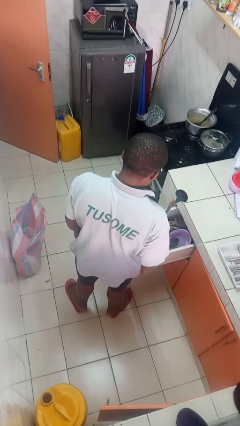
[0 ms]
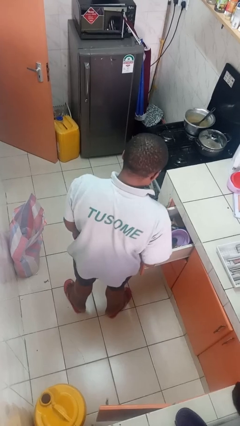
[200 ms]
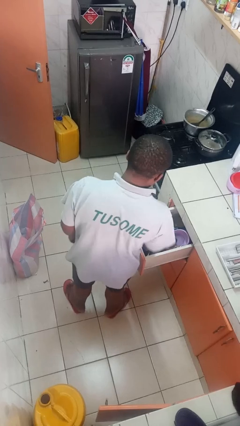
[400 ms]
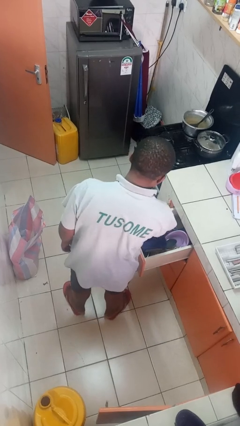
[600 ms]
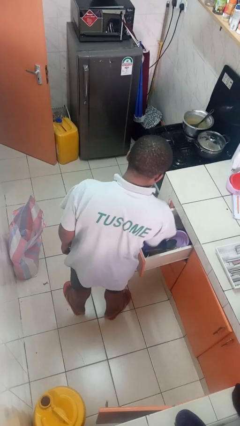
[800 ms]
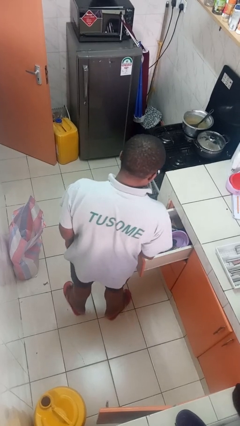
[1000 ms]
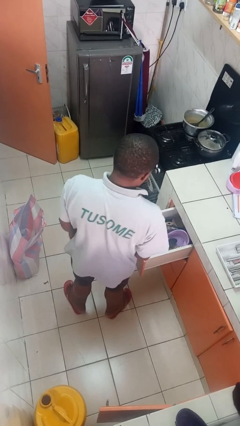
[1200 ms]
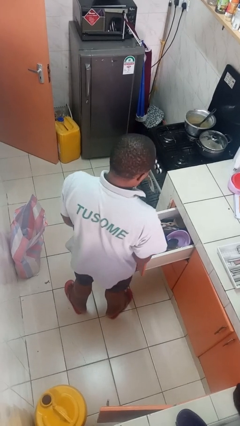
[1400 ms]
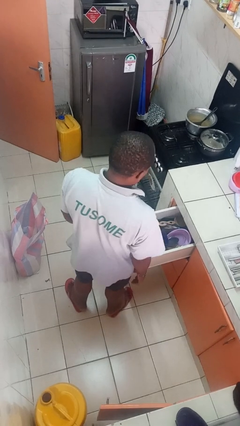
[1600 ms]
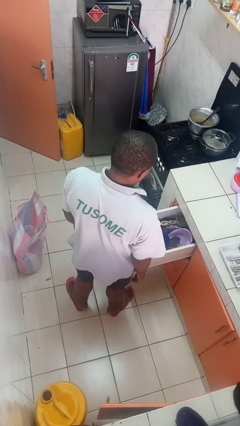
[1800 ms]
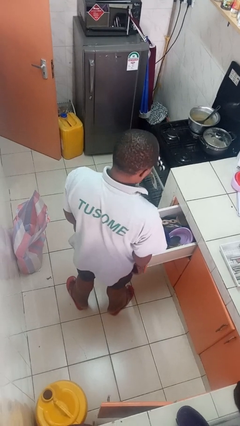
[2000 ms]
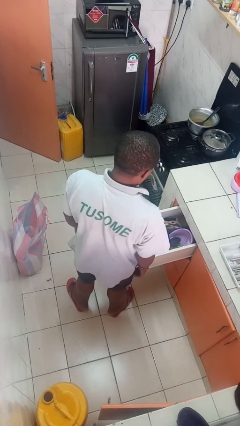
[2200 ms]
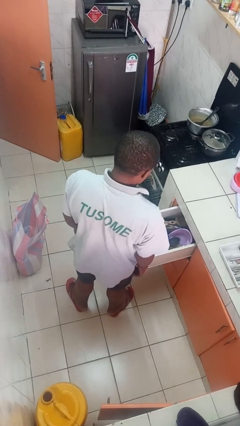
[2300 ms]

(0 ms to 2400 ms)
person puts object into kitchen drawer

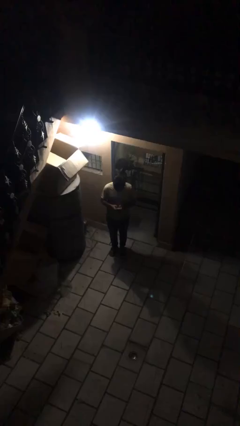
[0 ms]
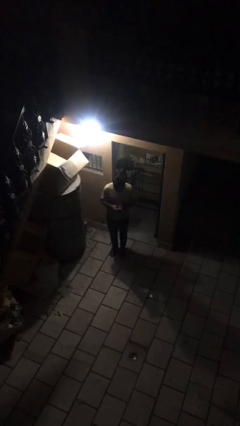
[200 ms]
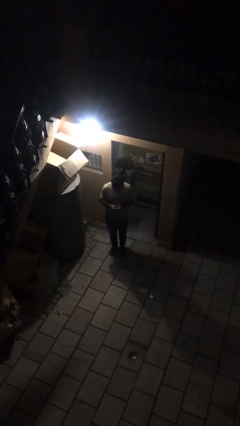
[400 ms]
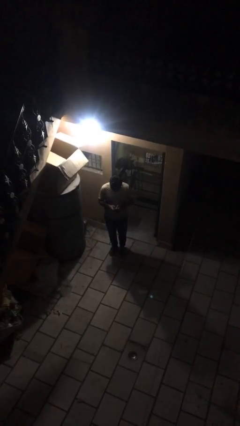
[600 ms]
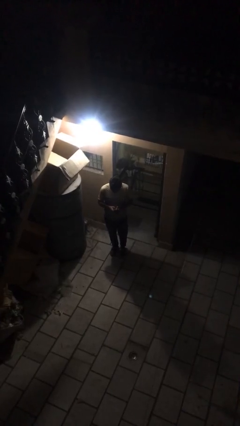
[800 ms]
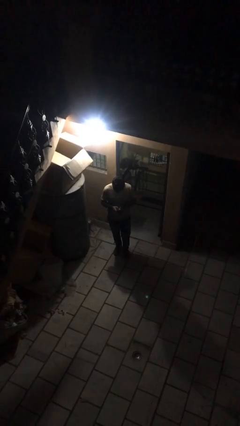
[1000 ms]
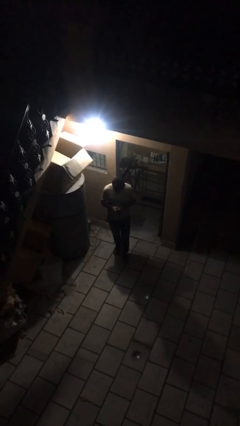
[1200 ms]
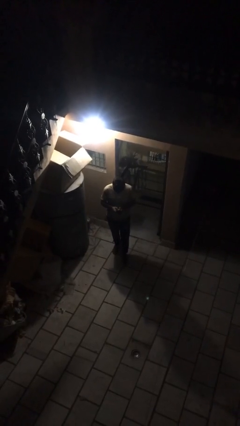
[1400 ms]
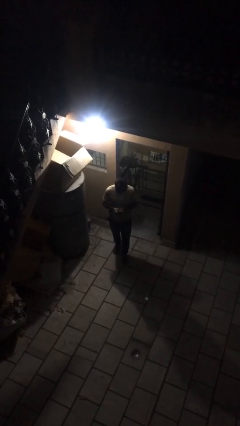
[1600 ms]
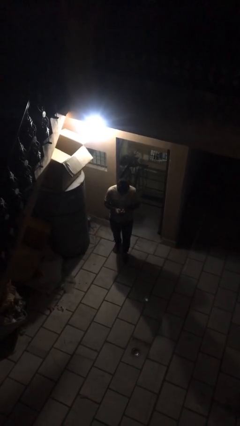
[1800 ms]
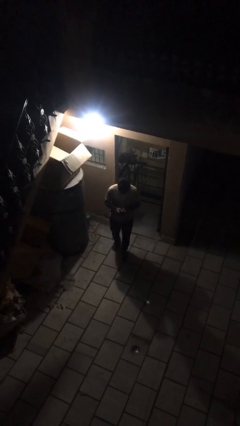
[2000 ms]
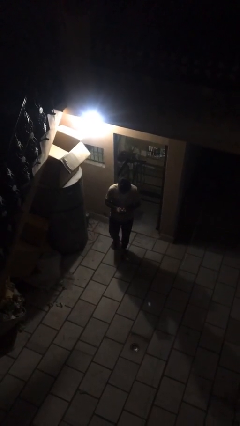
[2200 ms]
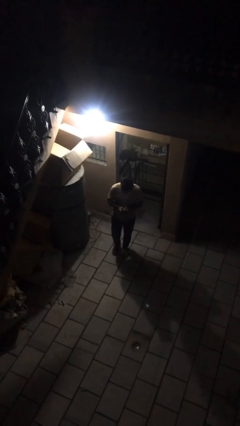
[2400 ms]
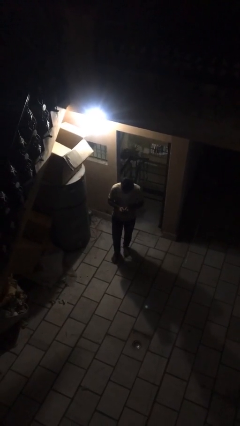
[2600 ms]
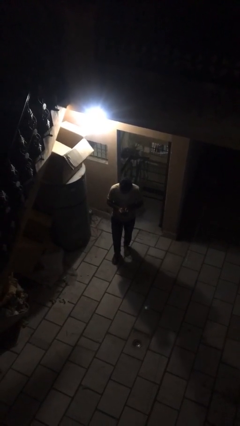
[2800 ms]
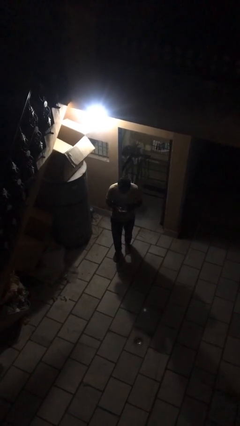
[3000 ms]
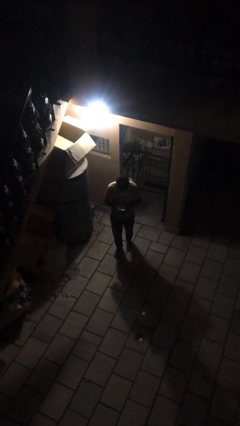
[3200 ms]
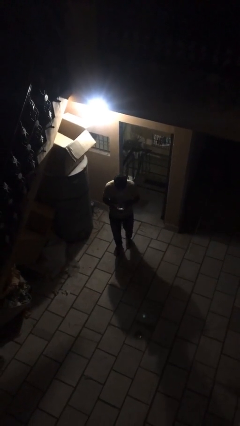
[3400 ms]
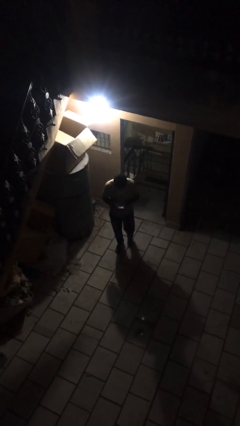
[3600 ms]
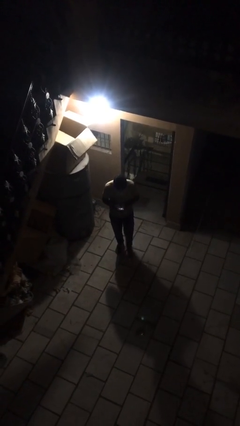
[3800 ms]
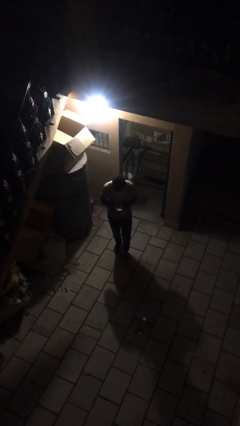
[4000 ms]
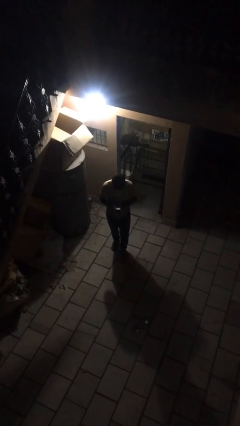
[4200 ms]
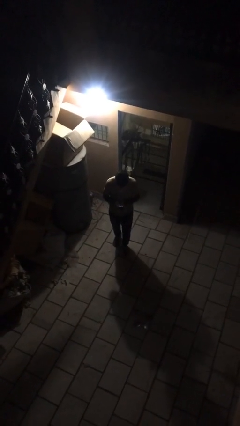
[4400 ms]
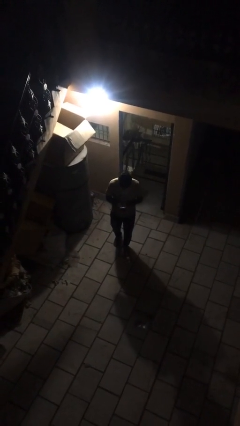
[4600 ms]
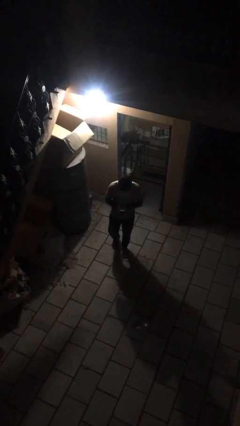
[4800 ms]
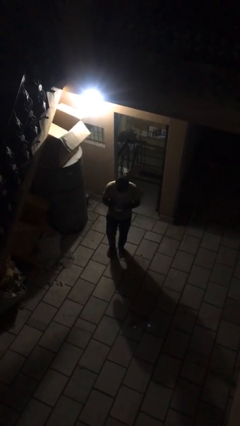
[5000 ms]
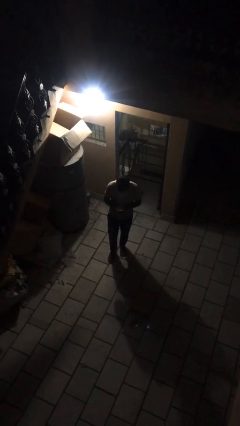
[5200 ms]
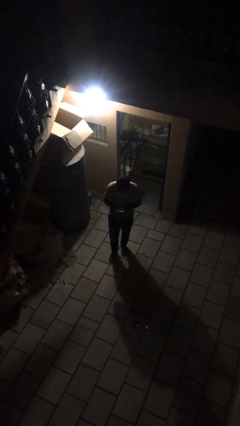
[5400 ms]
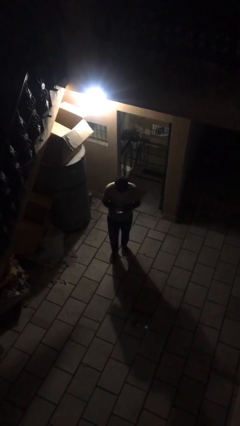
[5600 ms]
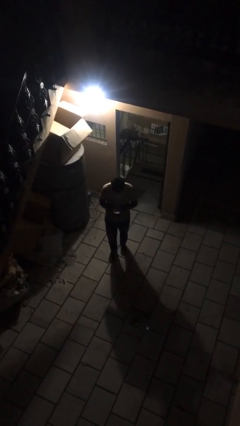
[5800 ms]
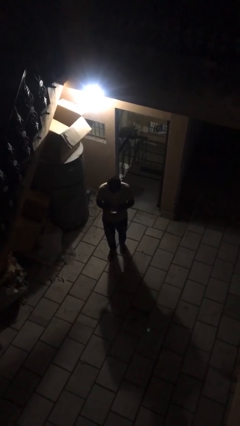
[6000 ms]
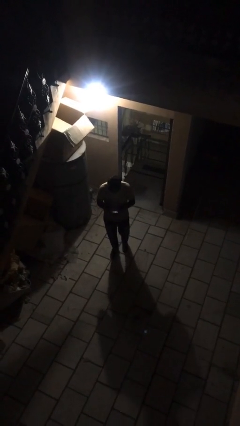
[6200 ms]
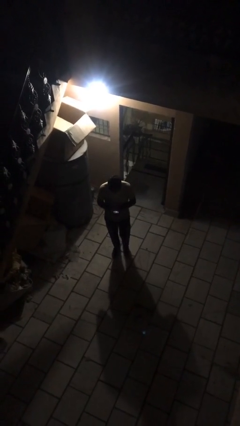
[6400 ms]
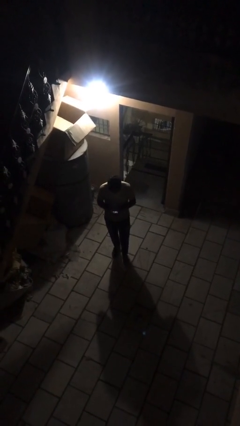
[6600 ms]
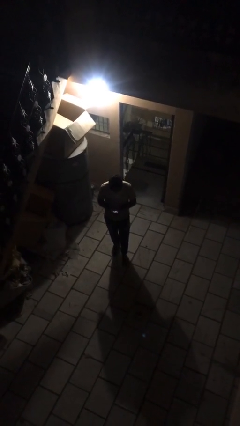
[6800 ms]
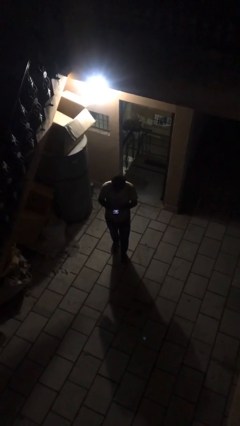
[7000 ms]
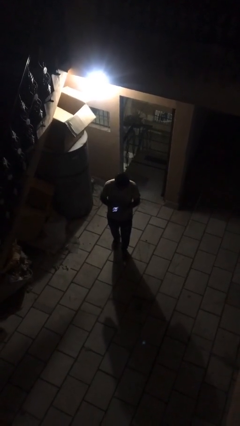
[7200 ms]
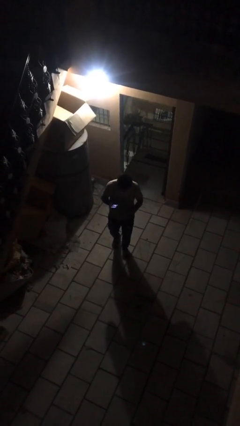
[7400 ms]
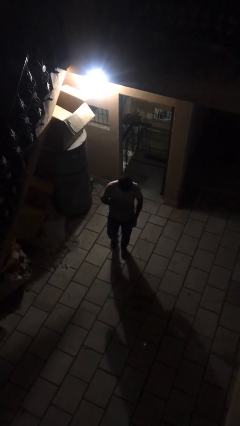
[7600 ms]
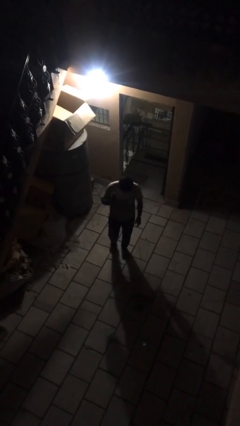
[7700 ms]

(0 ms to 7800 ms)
person texts on phone

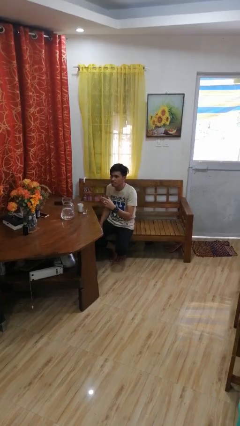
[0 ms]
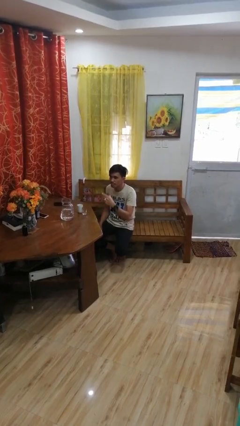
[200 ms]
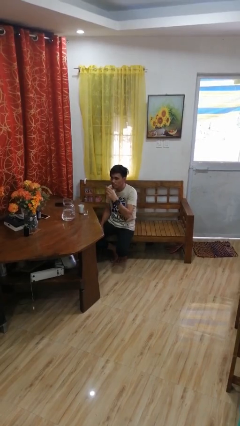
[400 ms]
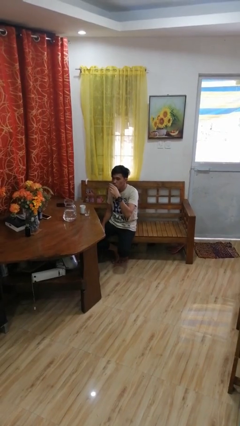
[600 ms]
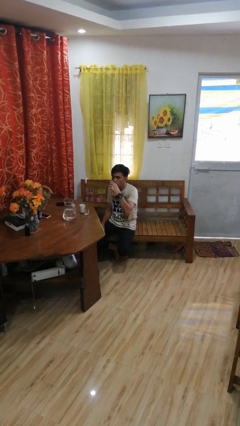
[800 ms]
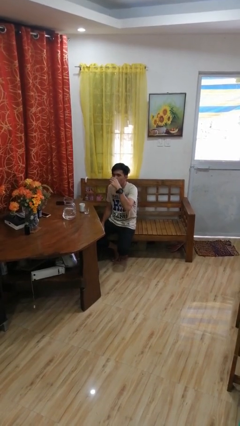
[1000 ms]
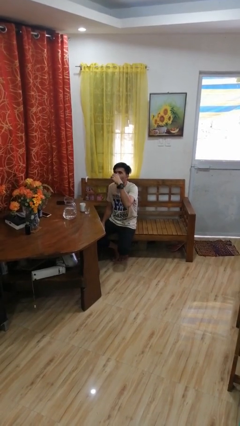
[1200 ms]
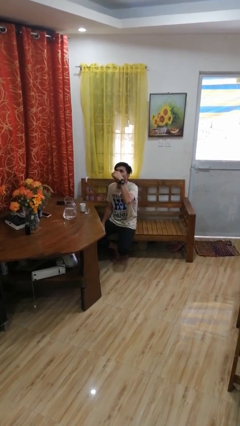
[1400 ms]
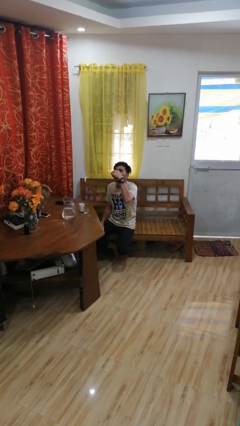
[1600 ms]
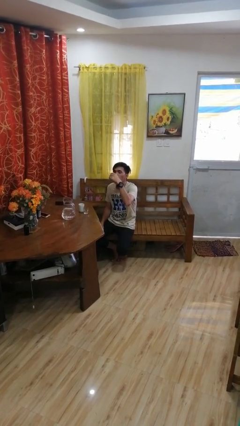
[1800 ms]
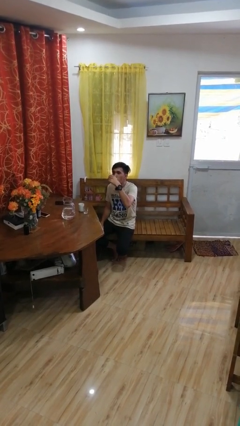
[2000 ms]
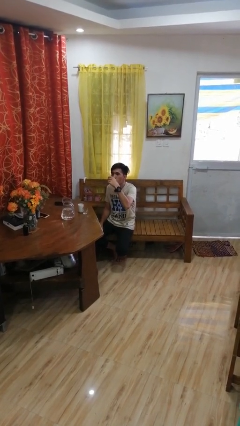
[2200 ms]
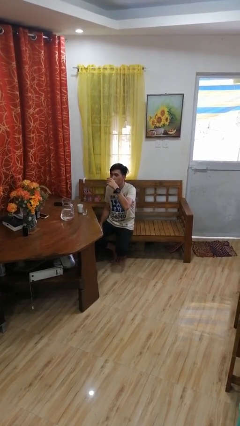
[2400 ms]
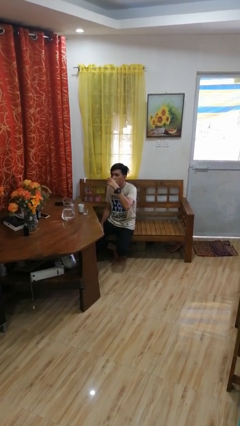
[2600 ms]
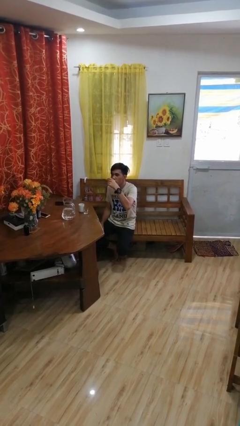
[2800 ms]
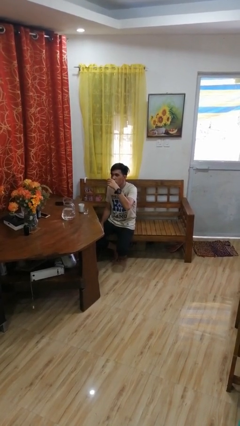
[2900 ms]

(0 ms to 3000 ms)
person drinks from shotglass

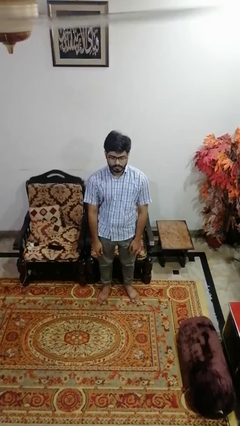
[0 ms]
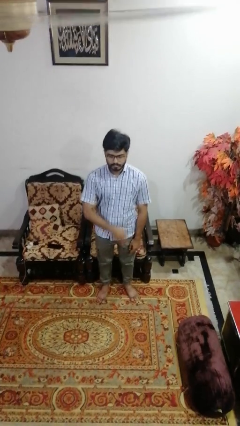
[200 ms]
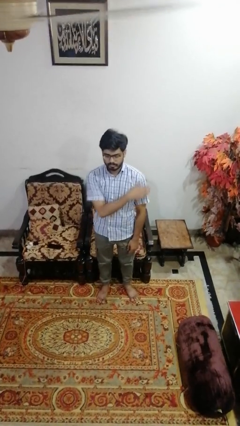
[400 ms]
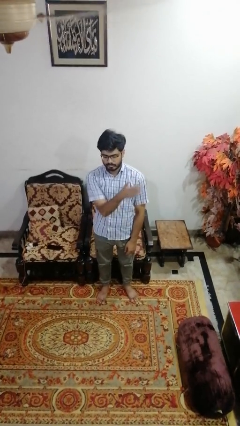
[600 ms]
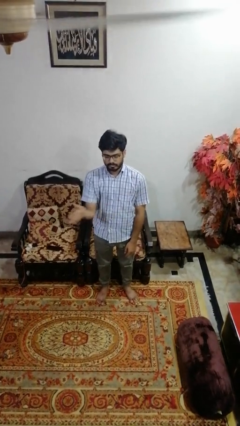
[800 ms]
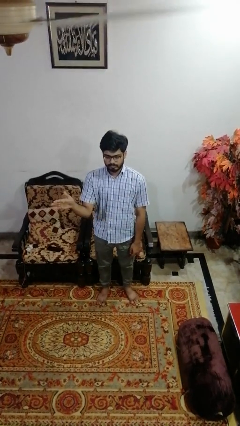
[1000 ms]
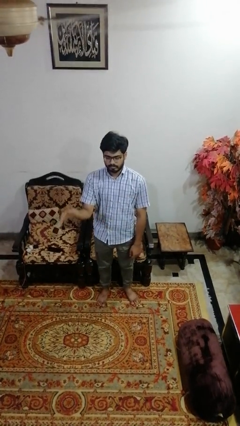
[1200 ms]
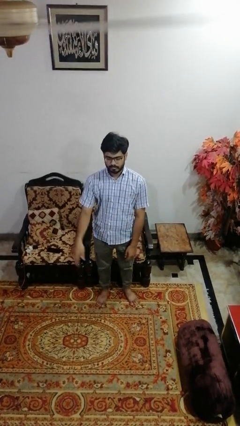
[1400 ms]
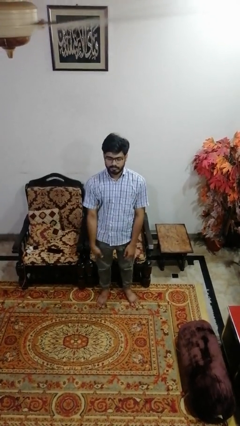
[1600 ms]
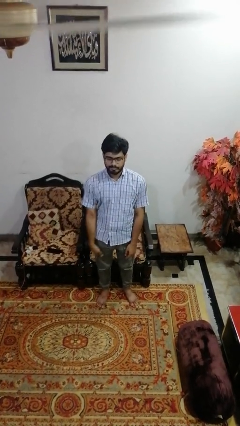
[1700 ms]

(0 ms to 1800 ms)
person gestures swipe right

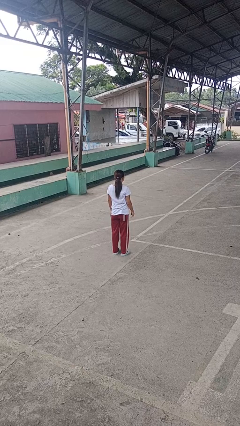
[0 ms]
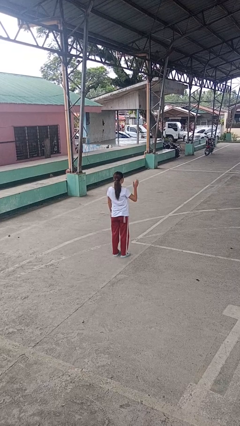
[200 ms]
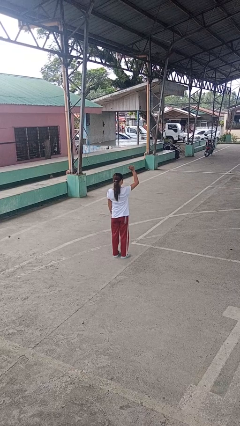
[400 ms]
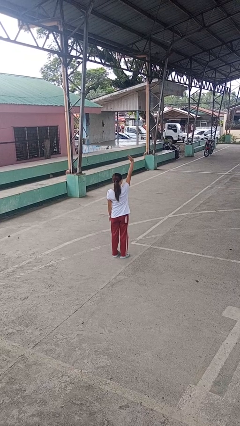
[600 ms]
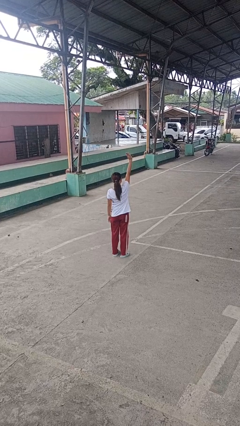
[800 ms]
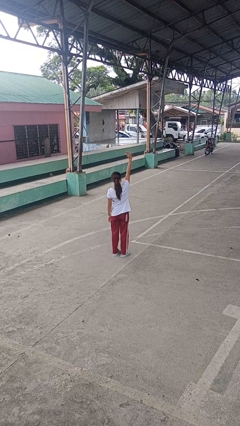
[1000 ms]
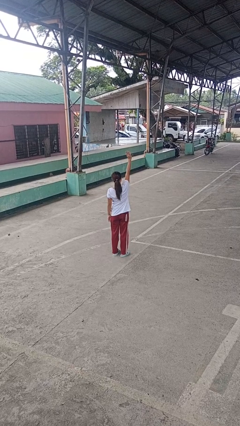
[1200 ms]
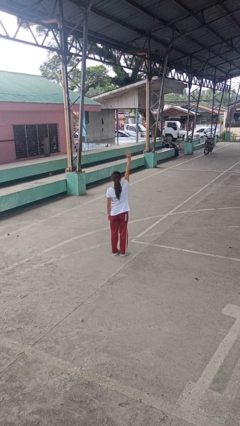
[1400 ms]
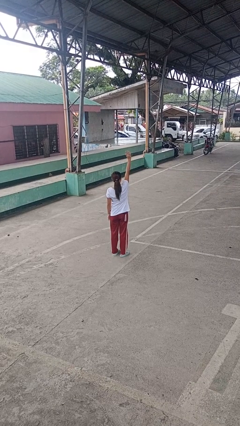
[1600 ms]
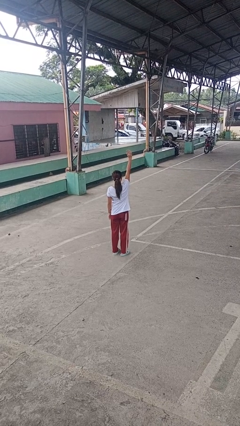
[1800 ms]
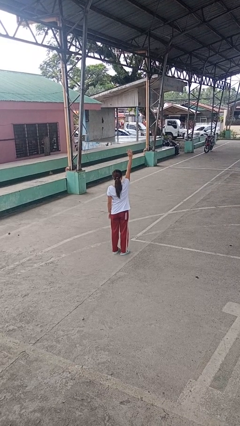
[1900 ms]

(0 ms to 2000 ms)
person gestures raise hand

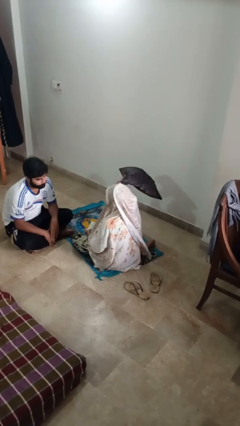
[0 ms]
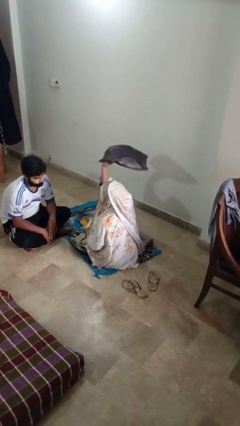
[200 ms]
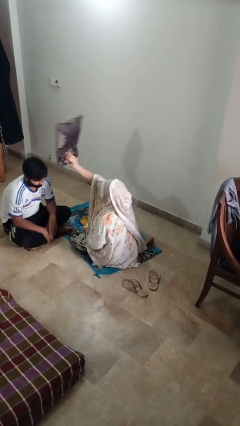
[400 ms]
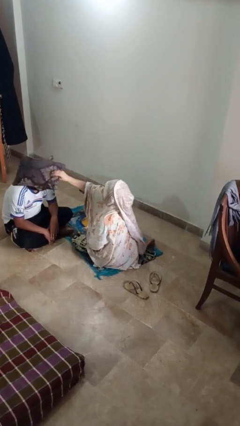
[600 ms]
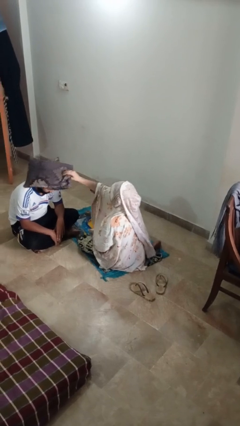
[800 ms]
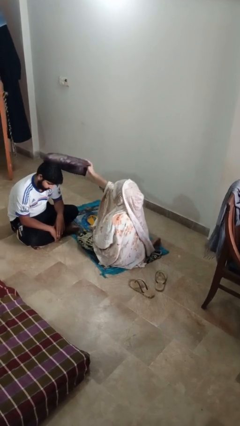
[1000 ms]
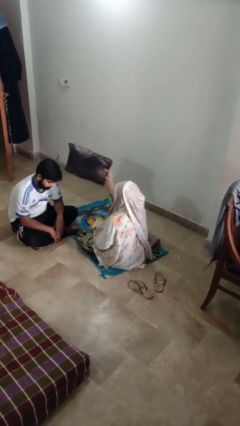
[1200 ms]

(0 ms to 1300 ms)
person hits person with pillow
